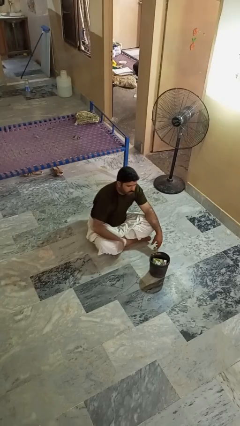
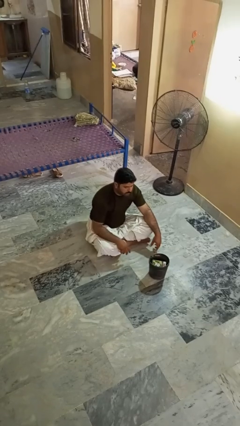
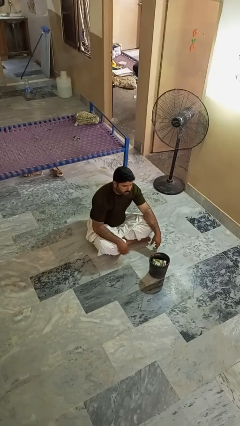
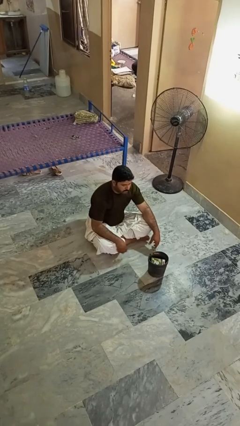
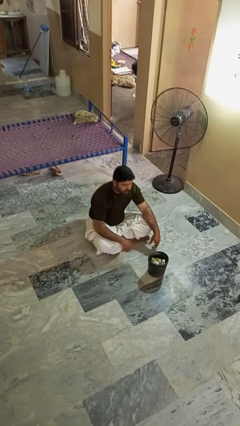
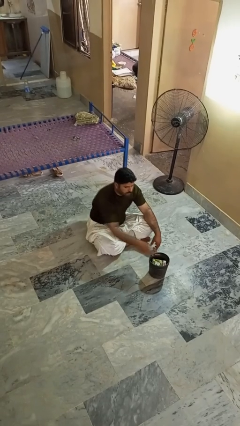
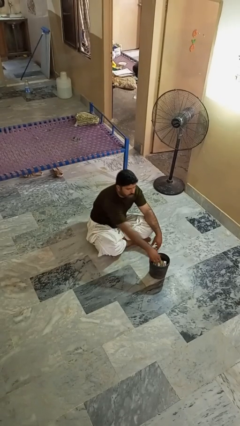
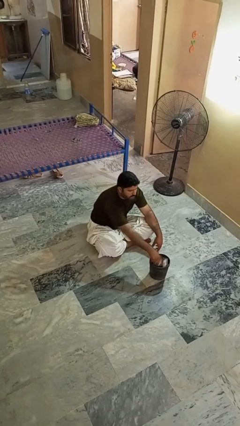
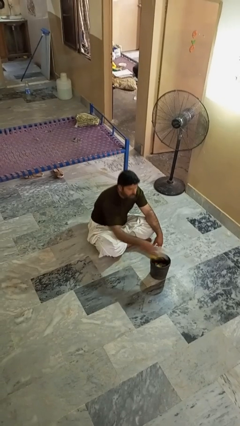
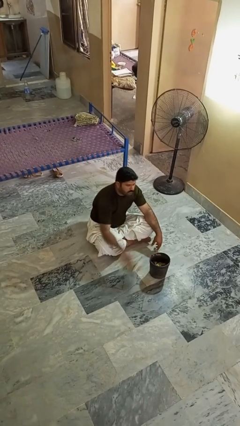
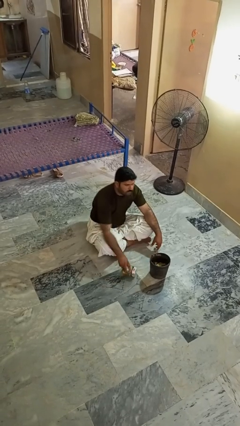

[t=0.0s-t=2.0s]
person takes object from basket

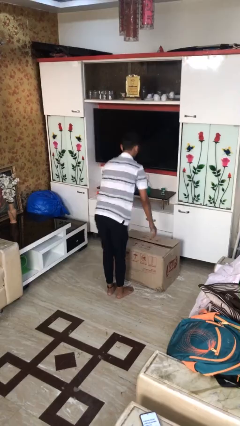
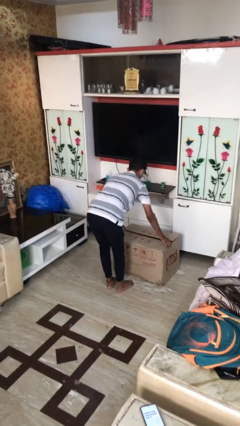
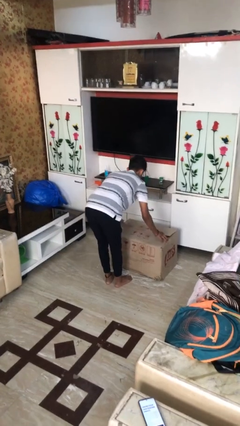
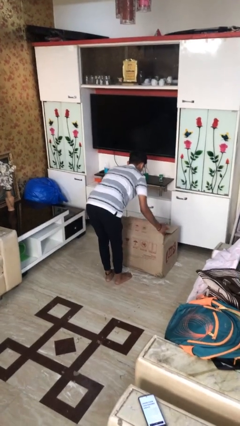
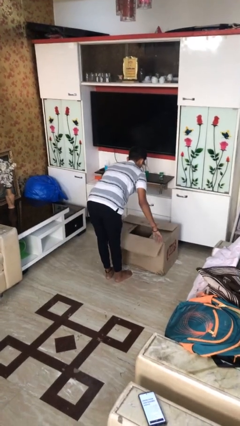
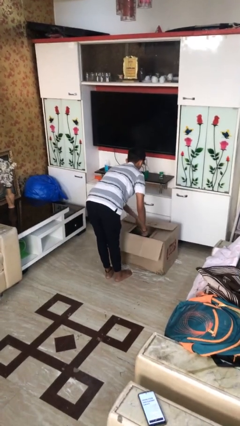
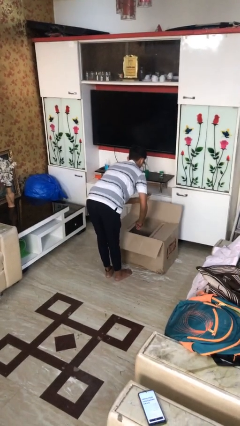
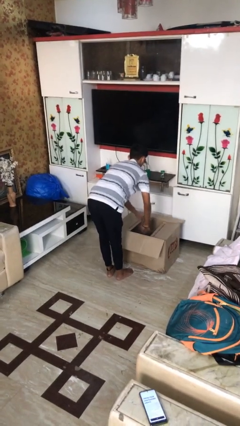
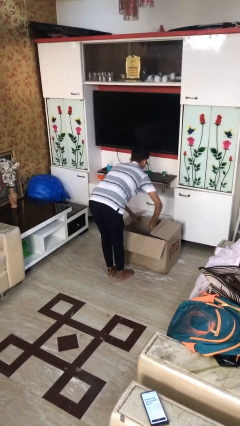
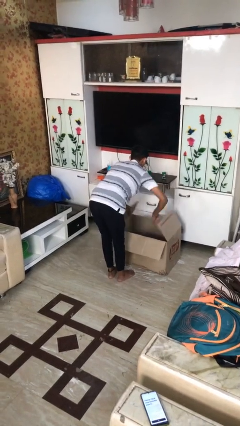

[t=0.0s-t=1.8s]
person opens box

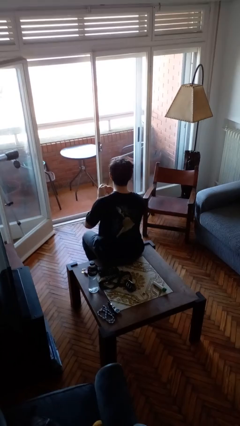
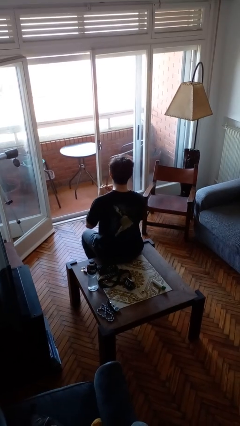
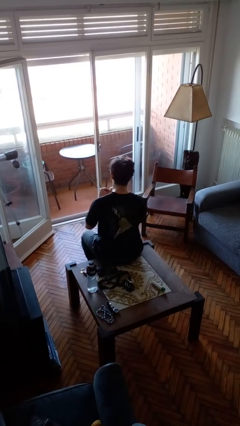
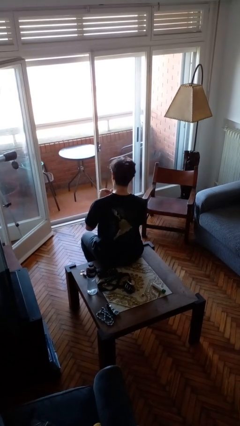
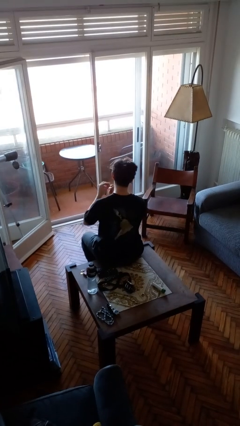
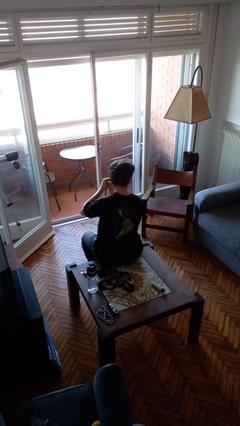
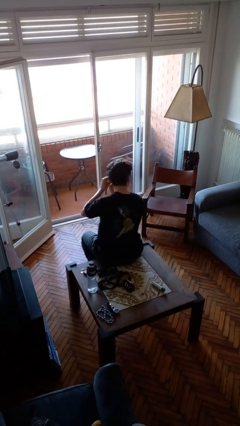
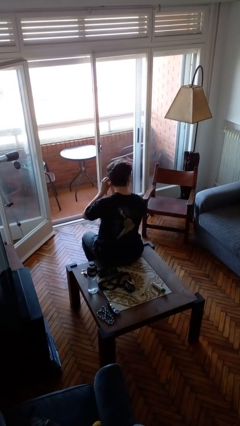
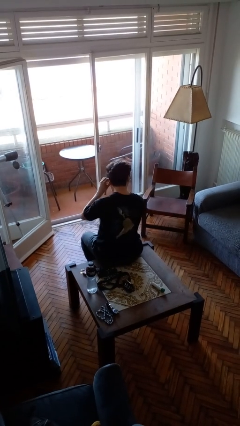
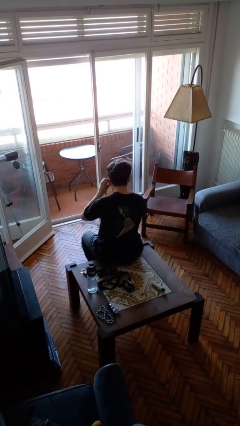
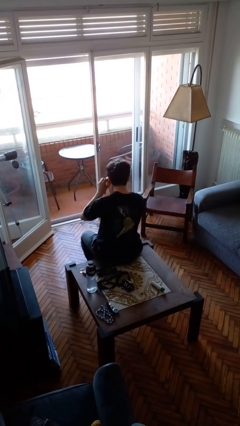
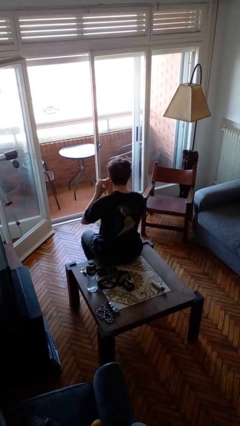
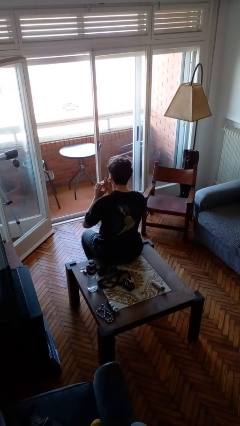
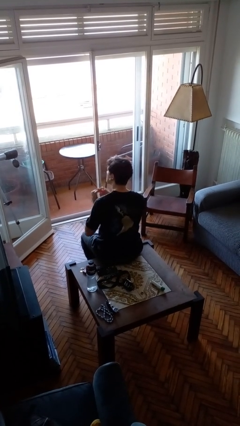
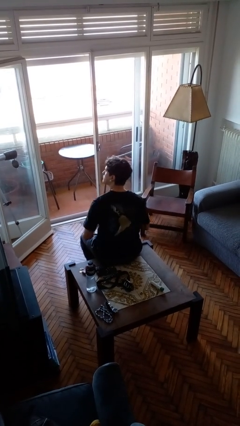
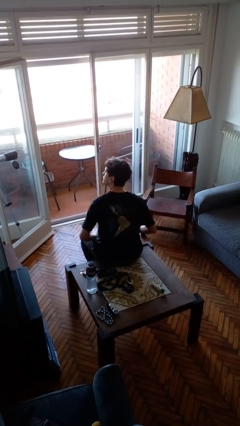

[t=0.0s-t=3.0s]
person puts on earrings

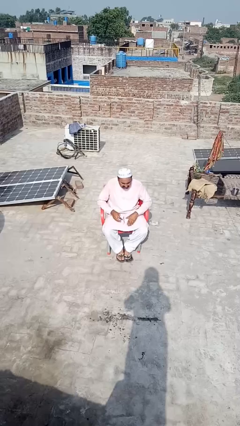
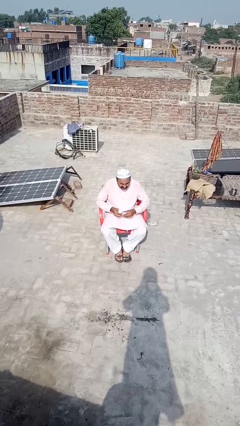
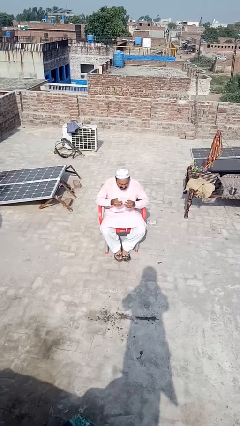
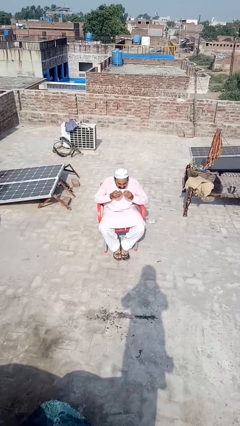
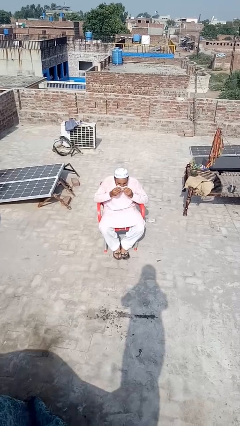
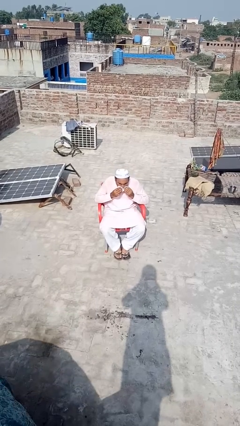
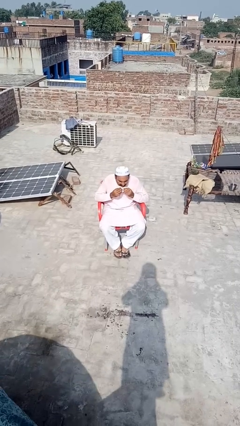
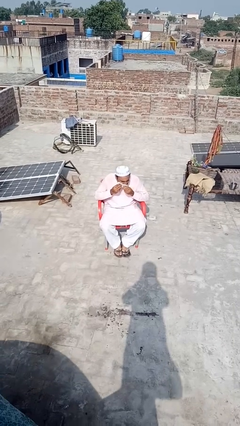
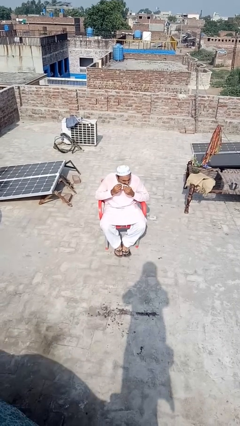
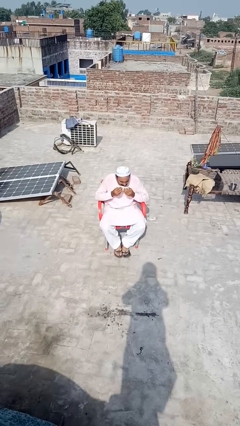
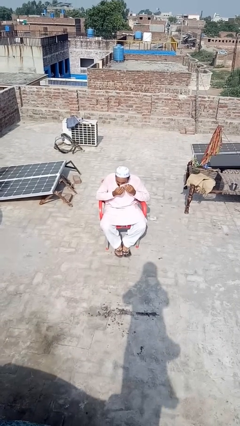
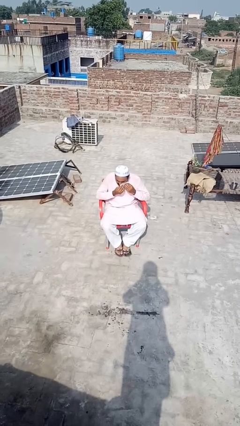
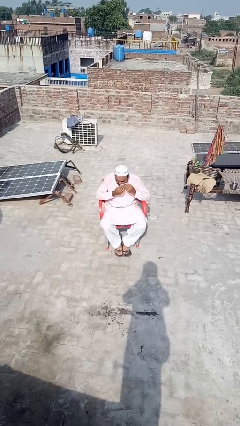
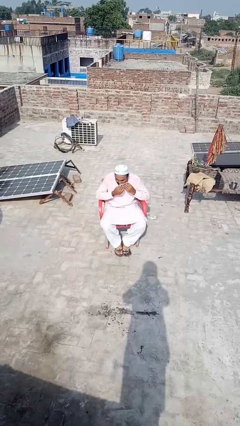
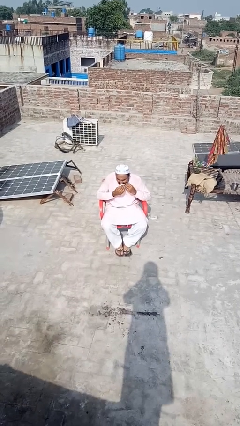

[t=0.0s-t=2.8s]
person wipes mouth with napkin

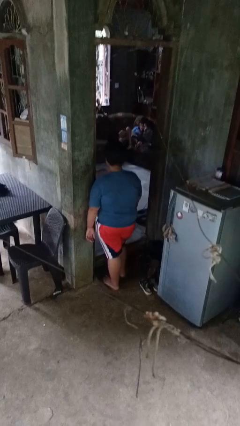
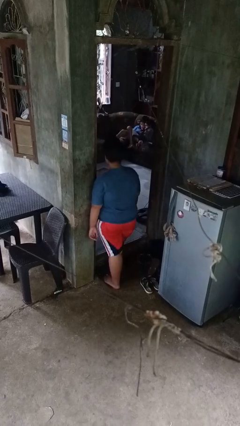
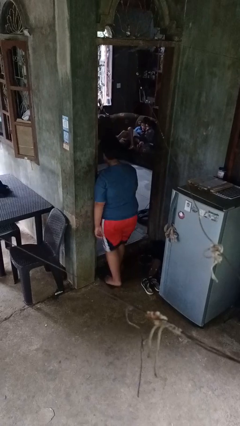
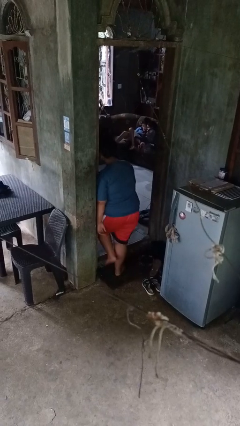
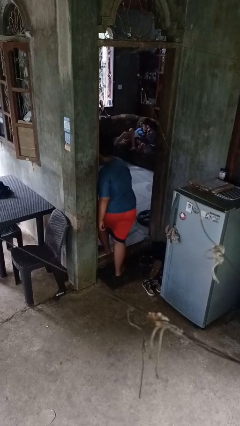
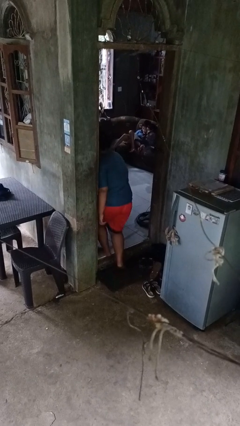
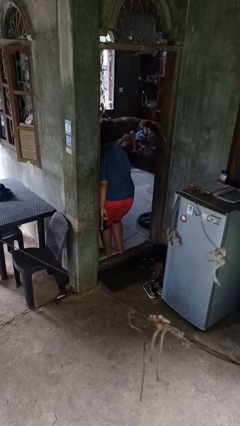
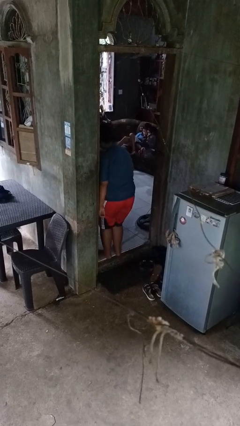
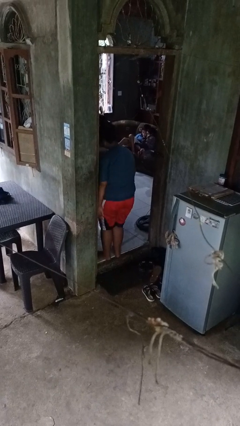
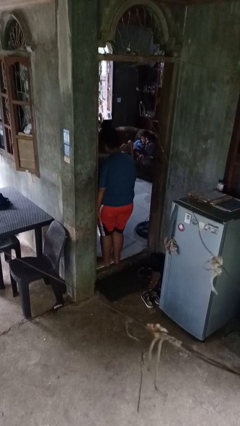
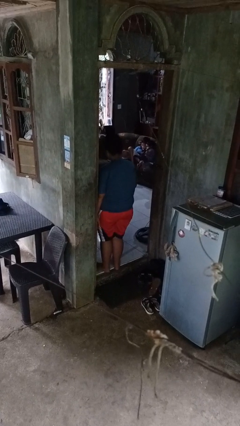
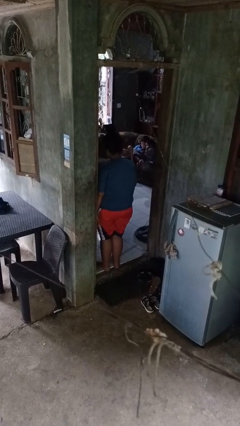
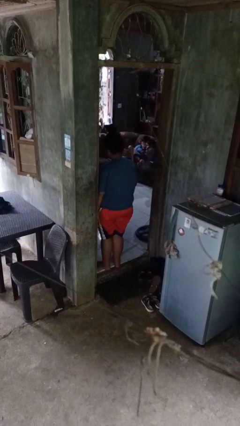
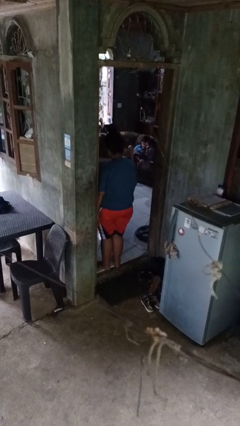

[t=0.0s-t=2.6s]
person bumps into wall

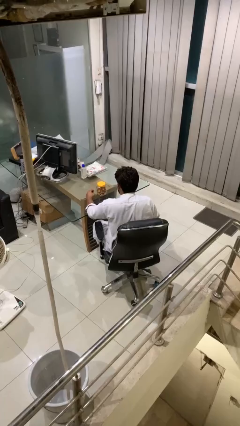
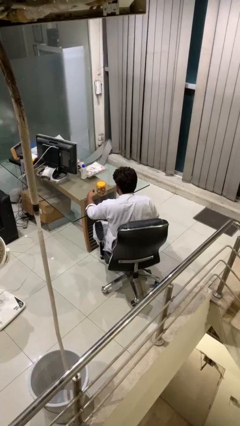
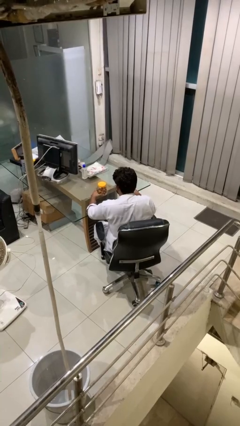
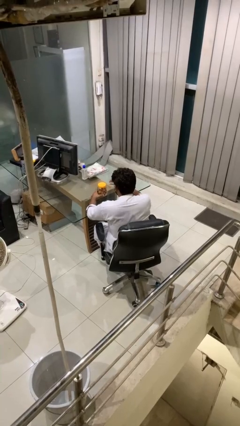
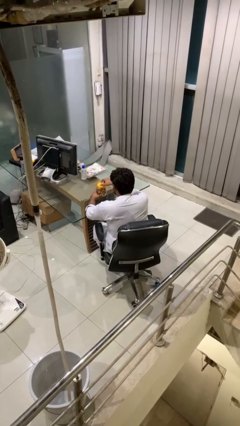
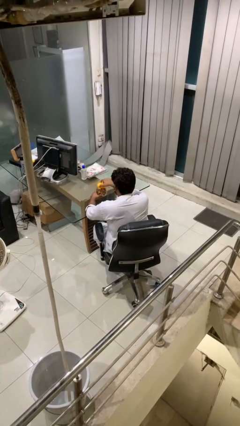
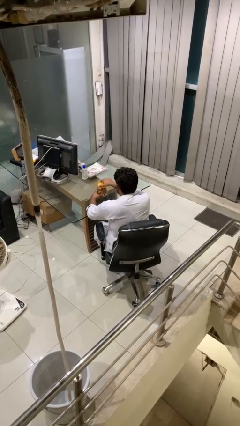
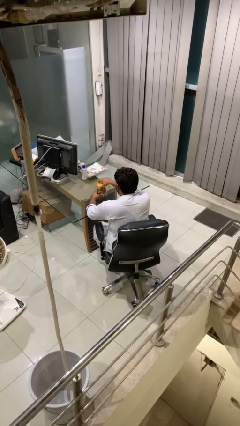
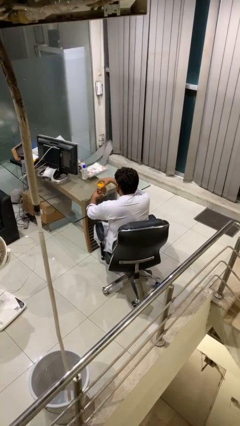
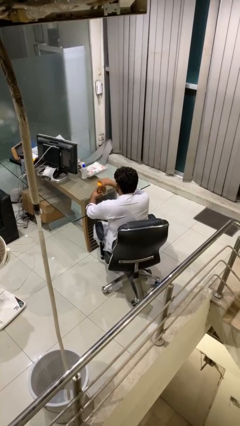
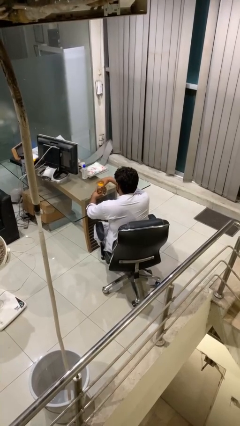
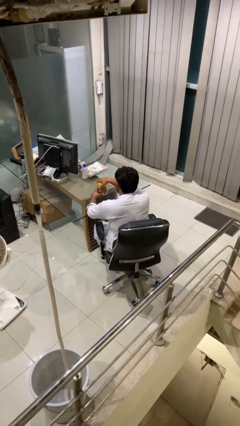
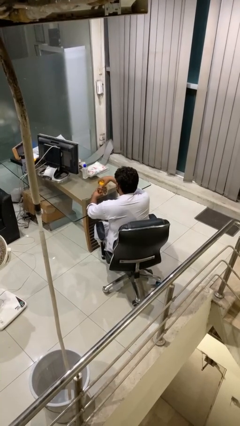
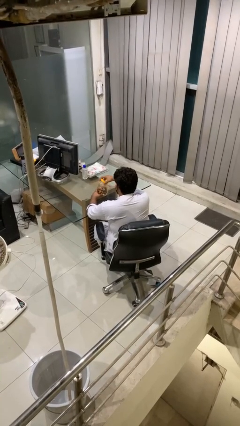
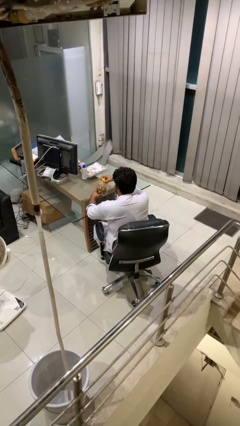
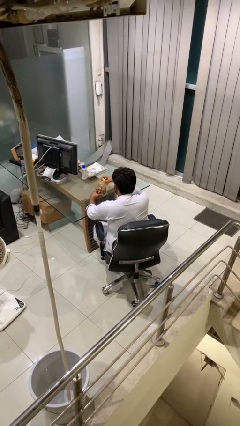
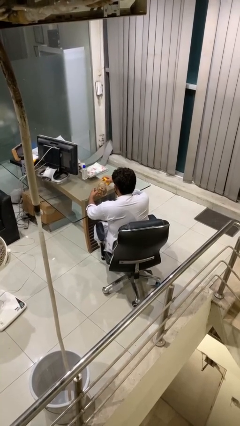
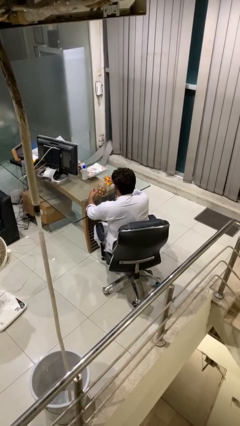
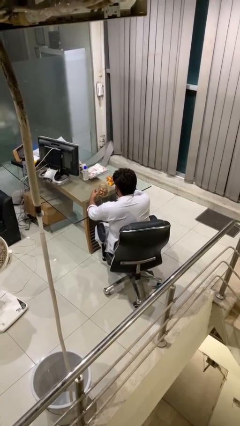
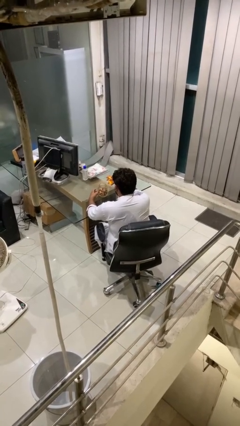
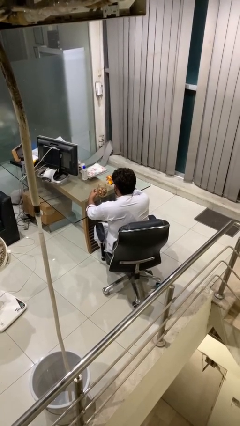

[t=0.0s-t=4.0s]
person opens jar

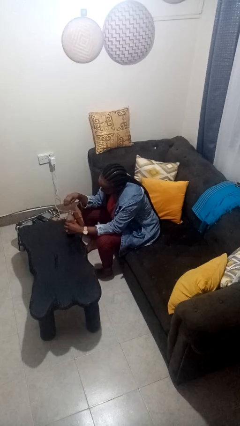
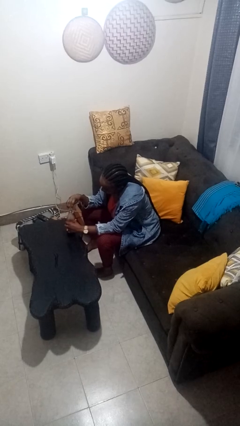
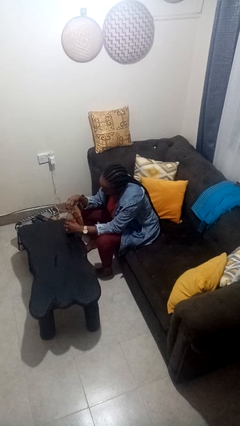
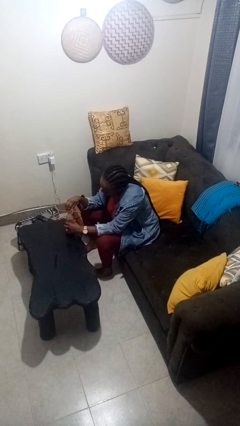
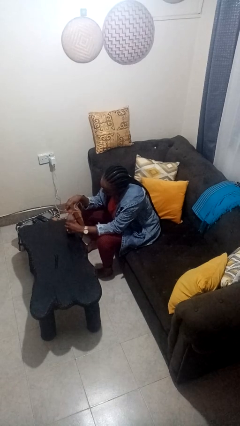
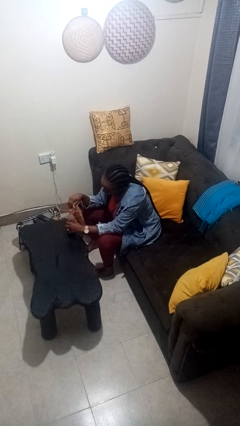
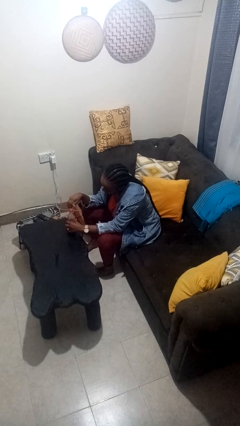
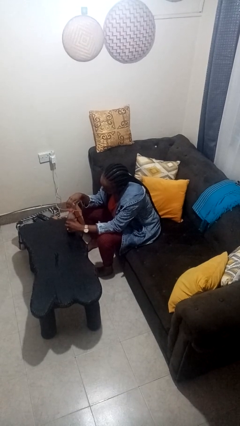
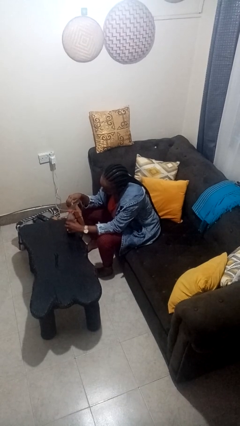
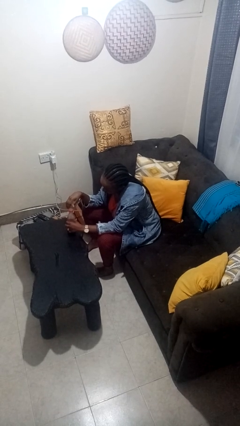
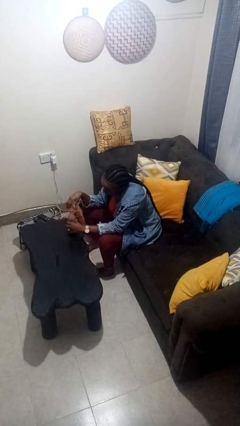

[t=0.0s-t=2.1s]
person screws lid to bottle
